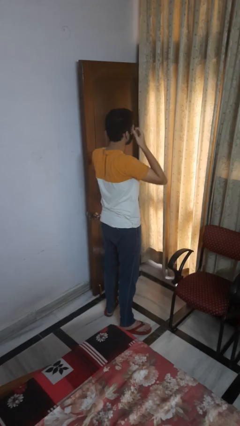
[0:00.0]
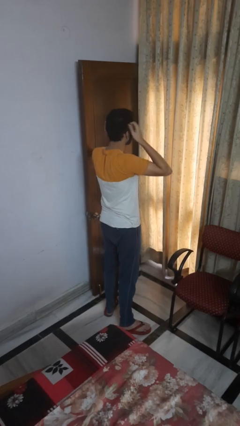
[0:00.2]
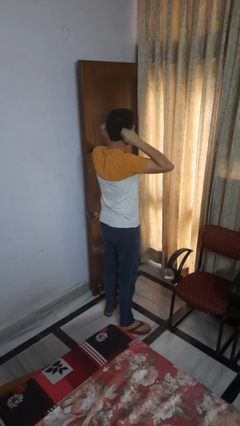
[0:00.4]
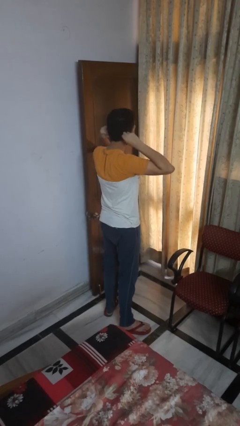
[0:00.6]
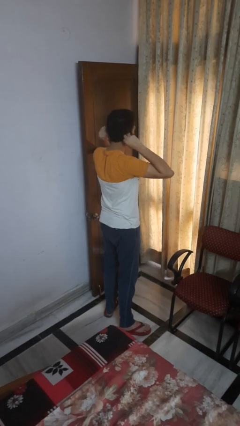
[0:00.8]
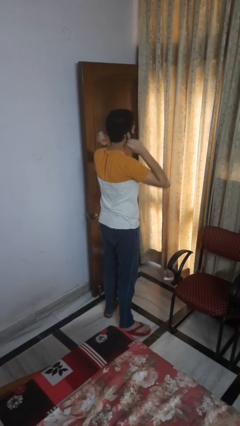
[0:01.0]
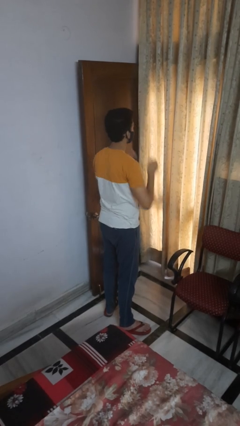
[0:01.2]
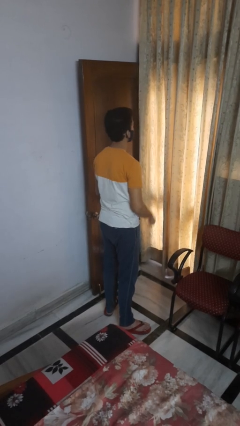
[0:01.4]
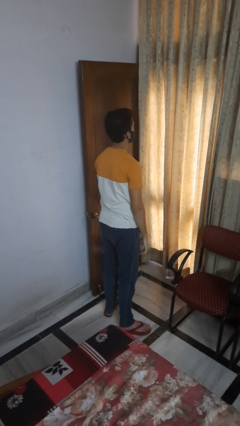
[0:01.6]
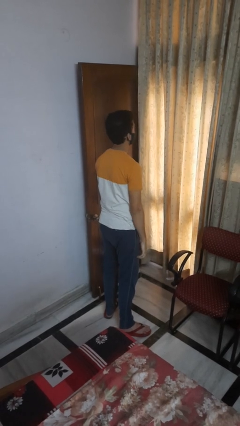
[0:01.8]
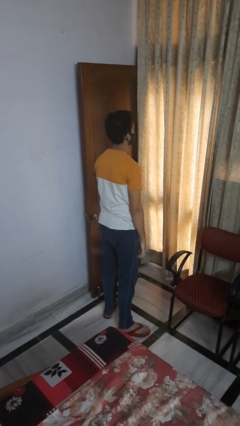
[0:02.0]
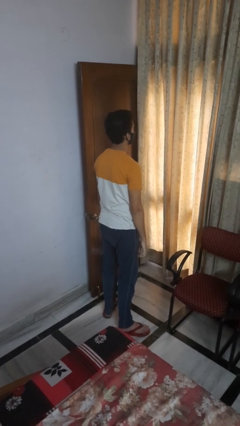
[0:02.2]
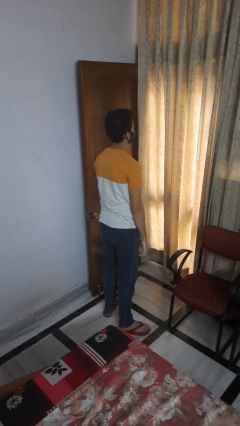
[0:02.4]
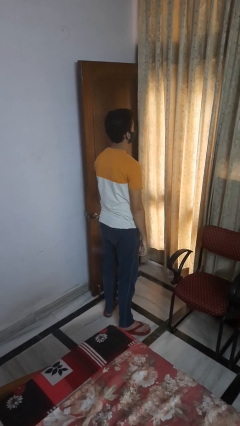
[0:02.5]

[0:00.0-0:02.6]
person puts on facemask

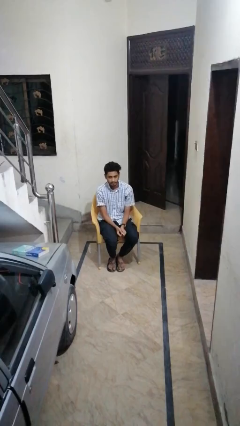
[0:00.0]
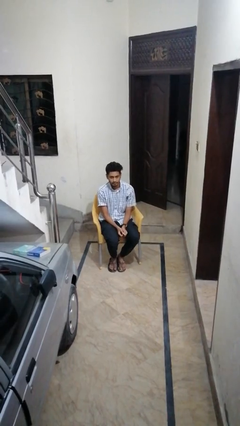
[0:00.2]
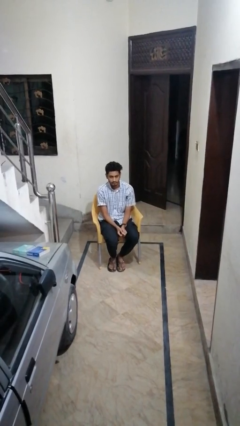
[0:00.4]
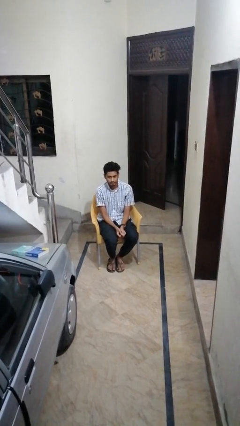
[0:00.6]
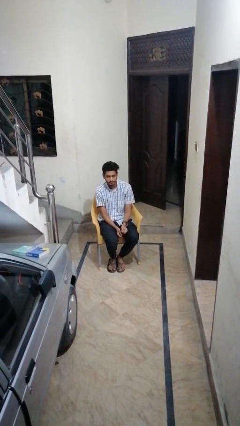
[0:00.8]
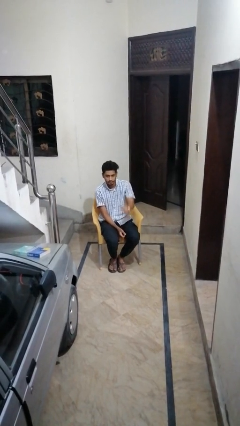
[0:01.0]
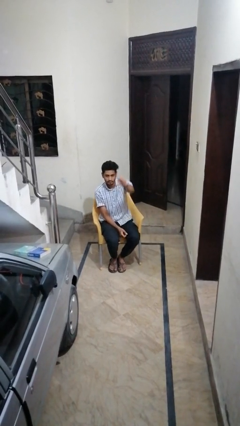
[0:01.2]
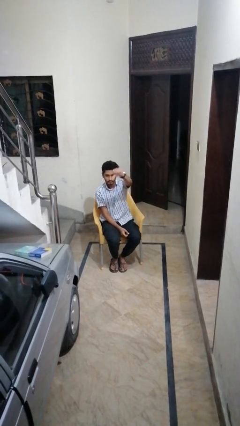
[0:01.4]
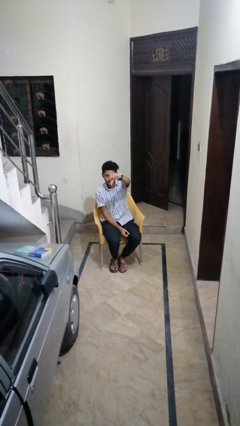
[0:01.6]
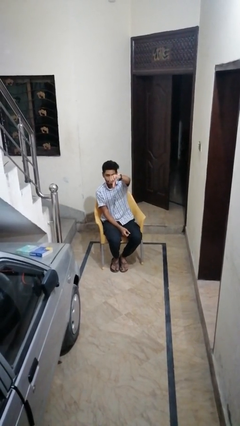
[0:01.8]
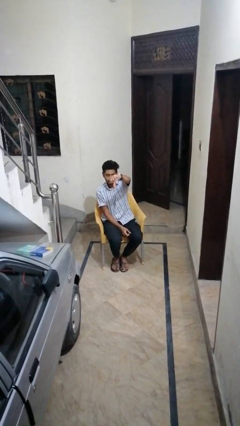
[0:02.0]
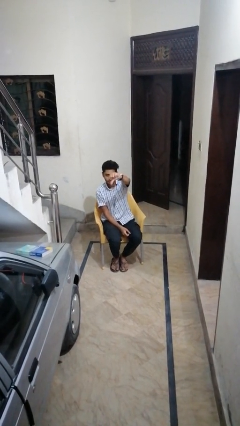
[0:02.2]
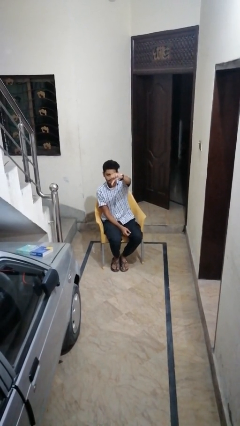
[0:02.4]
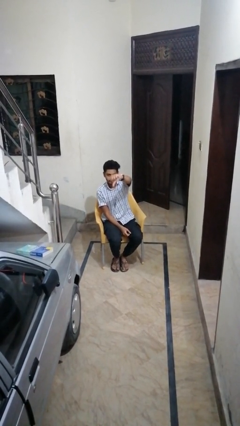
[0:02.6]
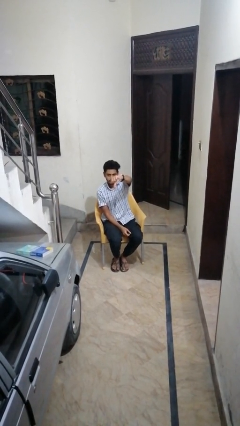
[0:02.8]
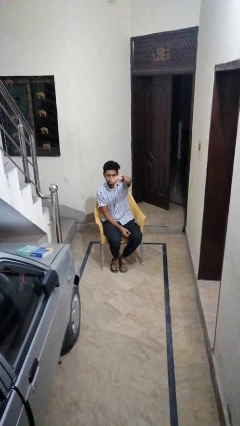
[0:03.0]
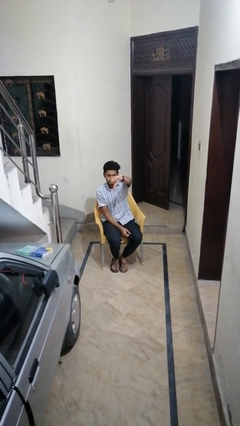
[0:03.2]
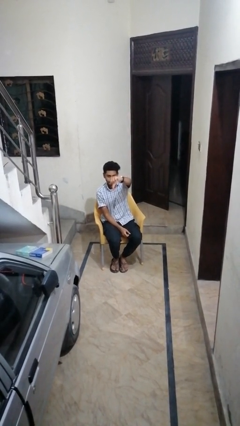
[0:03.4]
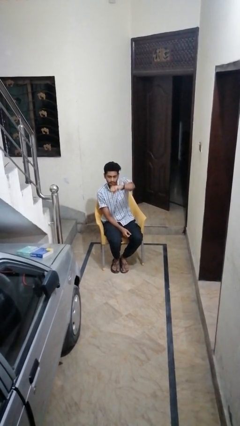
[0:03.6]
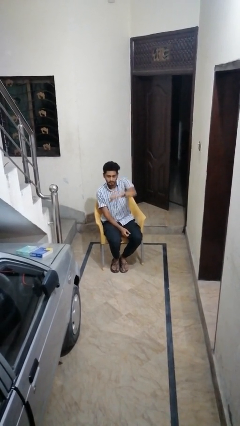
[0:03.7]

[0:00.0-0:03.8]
person gestures thumbs down

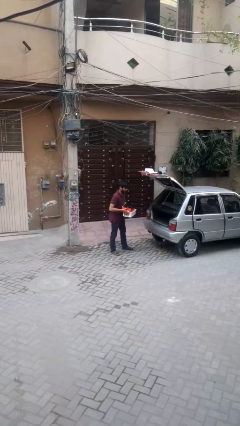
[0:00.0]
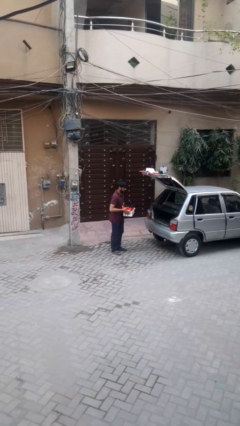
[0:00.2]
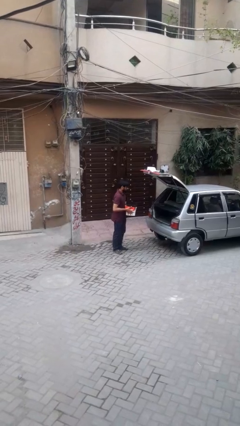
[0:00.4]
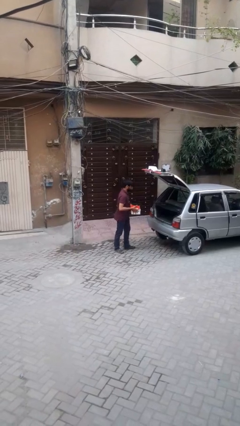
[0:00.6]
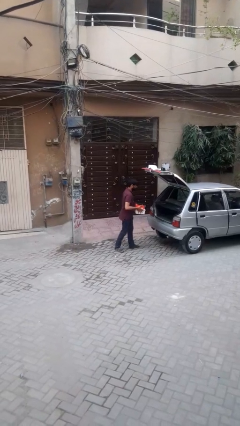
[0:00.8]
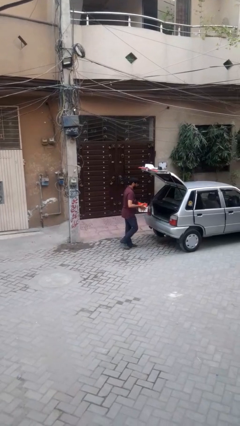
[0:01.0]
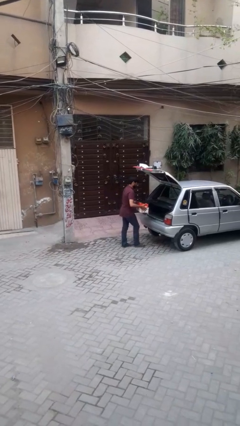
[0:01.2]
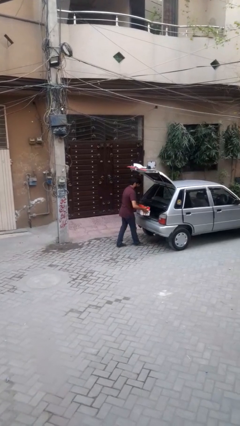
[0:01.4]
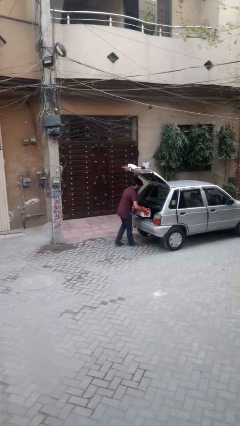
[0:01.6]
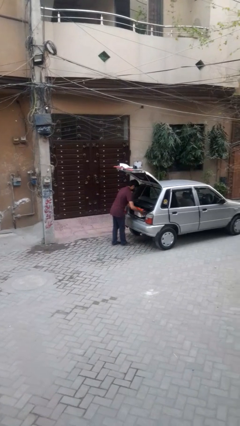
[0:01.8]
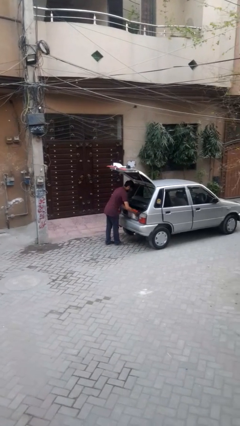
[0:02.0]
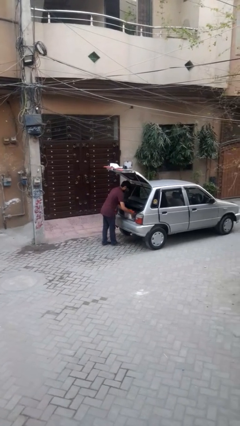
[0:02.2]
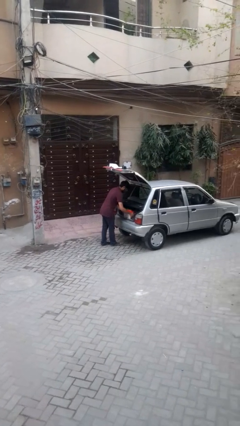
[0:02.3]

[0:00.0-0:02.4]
person loads car

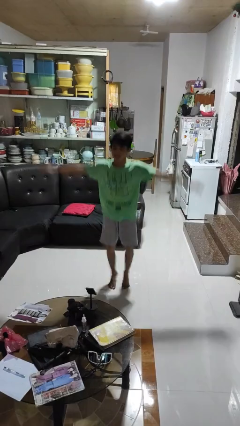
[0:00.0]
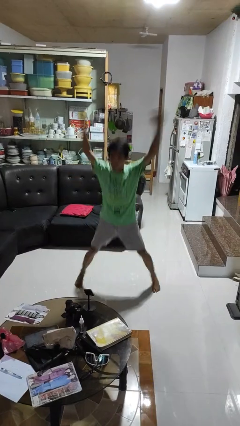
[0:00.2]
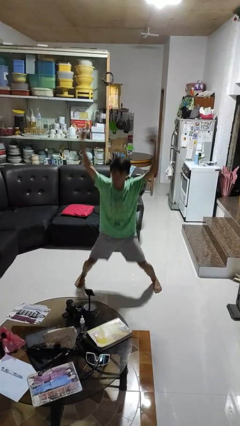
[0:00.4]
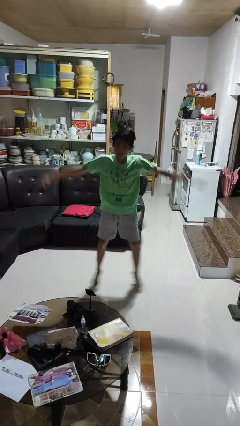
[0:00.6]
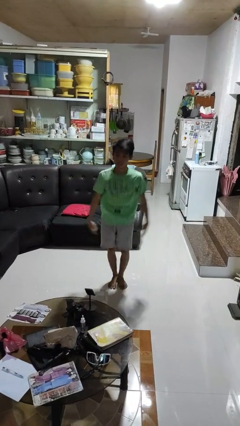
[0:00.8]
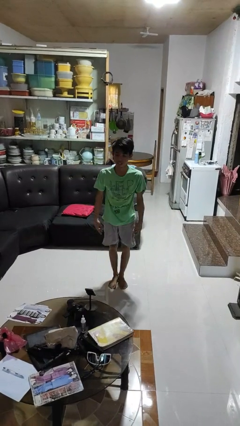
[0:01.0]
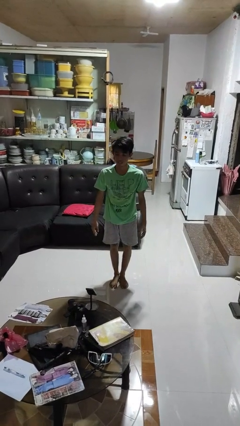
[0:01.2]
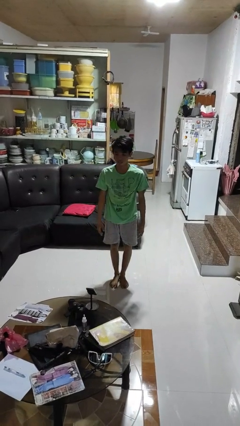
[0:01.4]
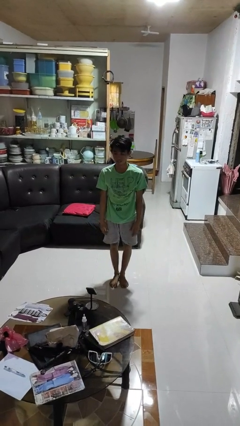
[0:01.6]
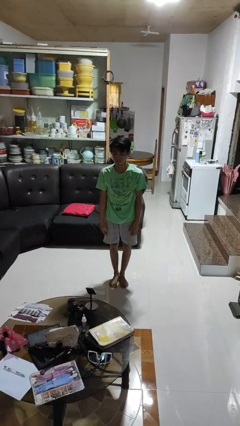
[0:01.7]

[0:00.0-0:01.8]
person exercises with jumping jacks

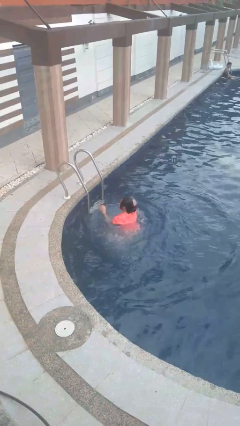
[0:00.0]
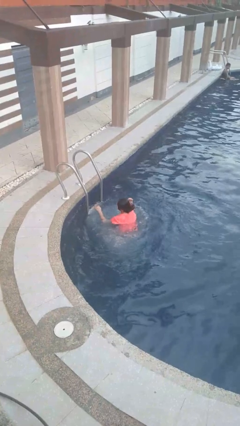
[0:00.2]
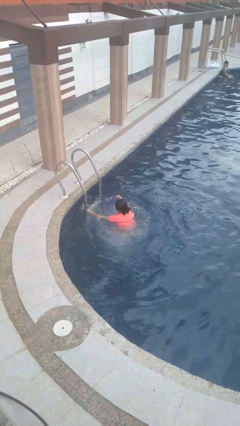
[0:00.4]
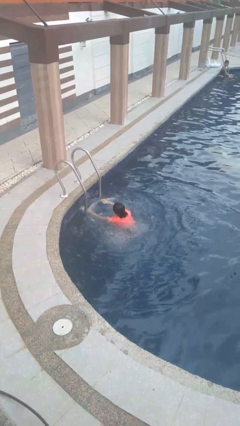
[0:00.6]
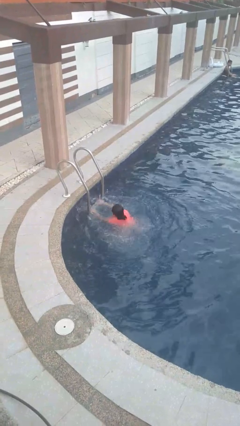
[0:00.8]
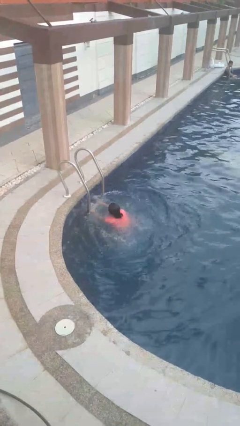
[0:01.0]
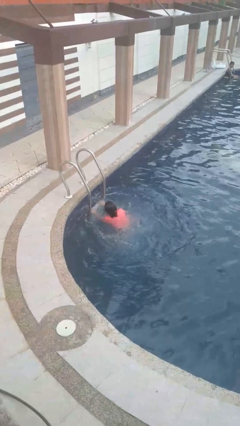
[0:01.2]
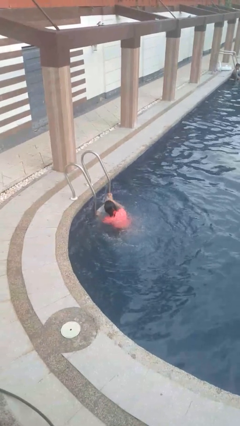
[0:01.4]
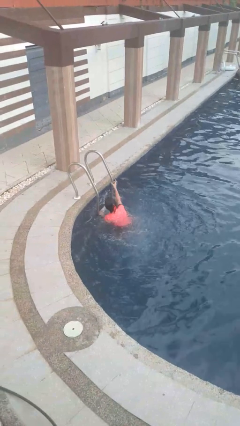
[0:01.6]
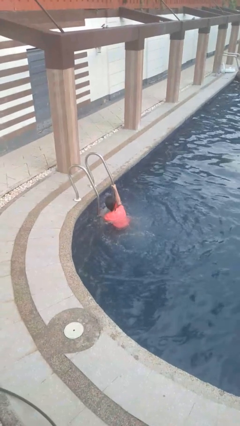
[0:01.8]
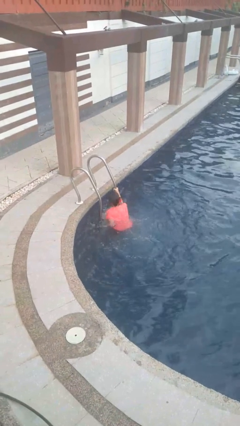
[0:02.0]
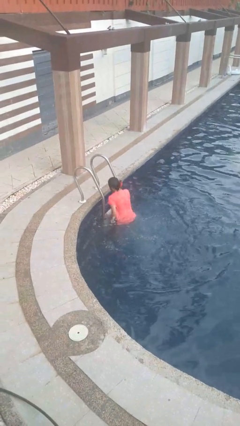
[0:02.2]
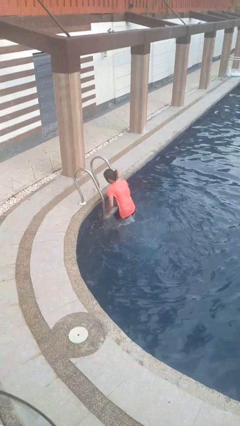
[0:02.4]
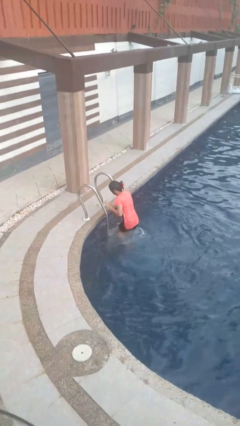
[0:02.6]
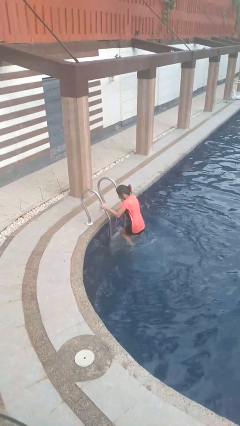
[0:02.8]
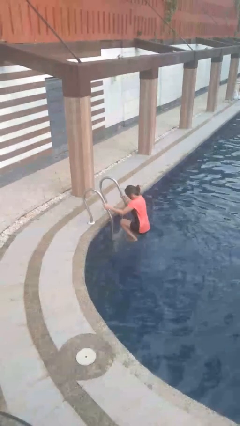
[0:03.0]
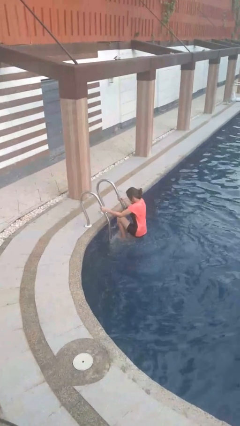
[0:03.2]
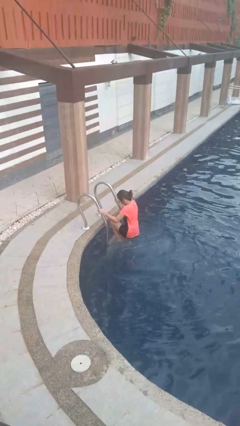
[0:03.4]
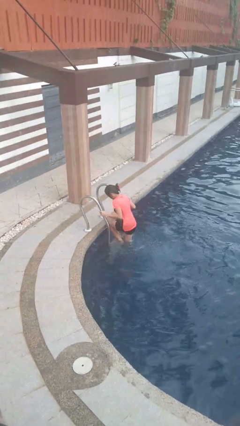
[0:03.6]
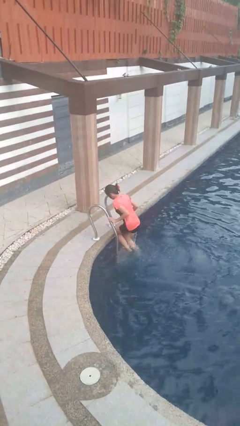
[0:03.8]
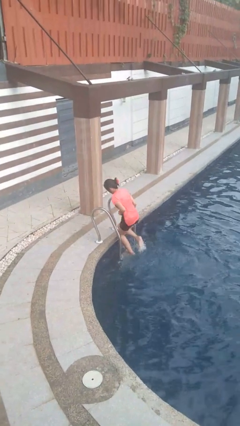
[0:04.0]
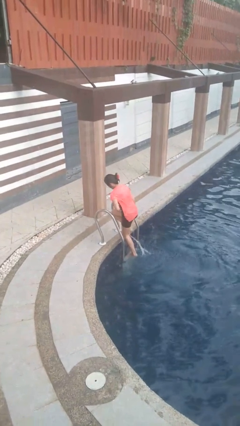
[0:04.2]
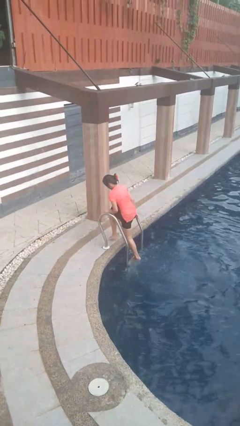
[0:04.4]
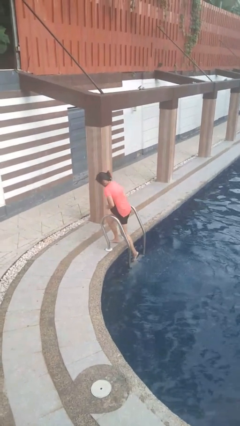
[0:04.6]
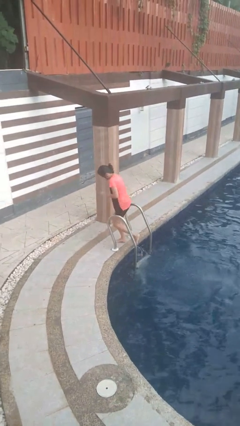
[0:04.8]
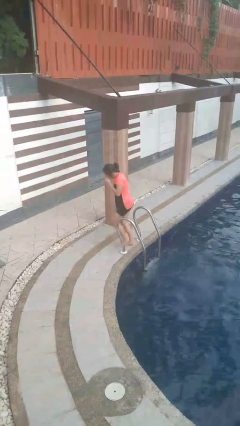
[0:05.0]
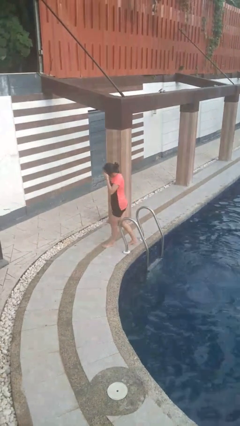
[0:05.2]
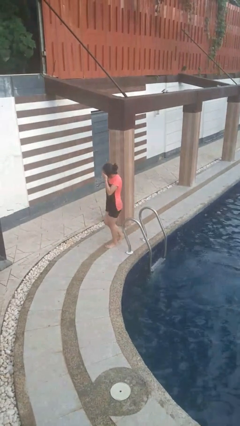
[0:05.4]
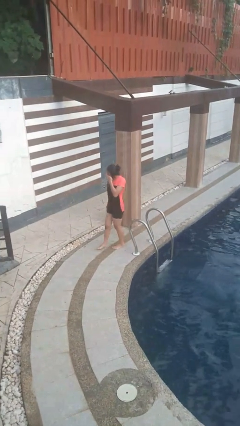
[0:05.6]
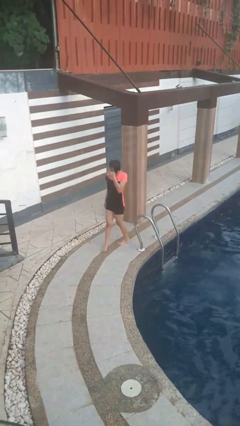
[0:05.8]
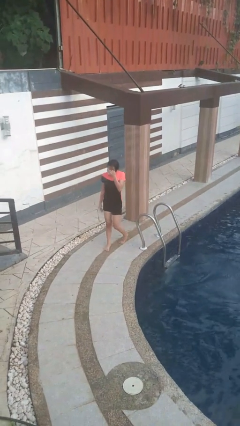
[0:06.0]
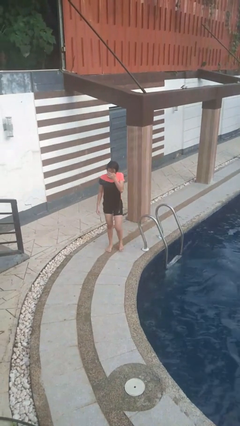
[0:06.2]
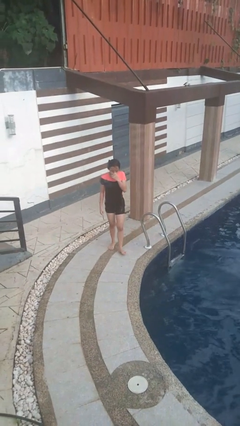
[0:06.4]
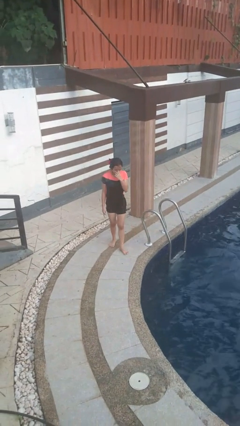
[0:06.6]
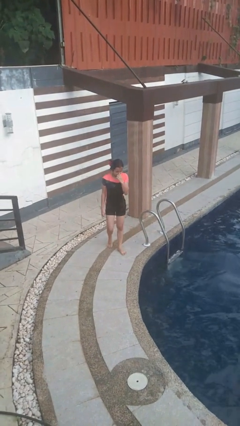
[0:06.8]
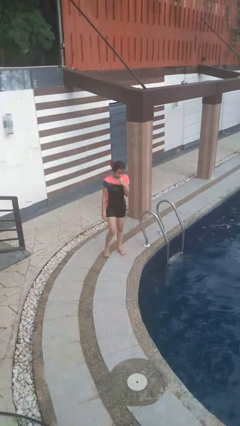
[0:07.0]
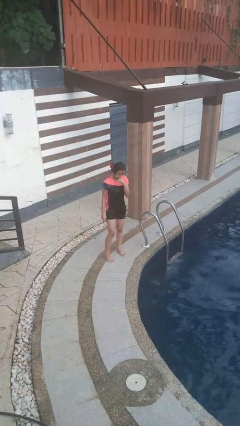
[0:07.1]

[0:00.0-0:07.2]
person exits pool
